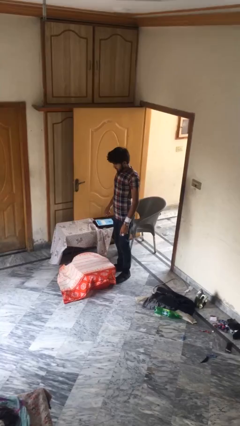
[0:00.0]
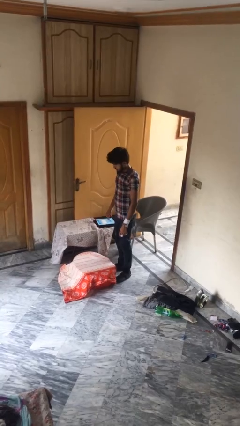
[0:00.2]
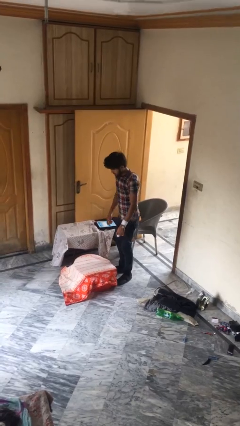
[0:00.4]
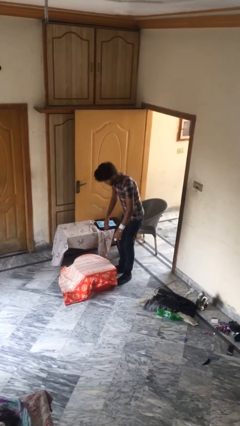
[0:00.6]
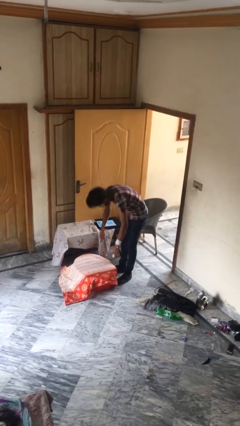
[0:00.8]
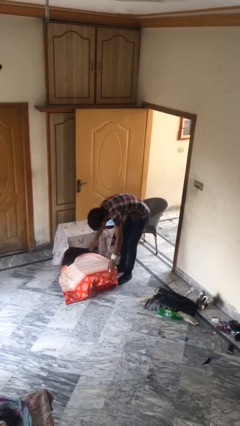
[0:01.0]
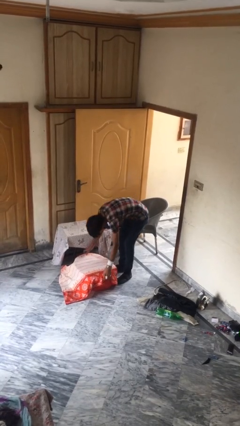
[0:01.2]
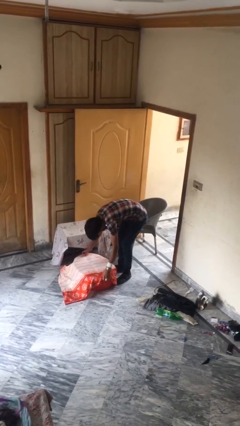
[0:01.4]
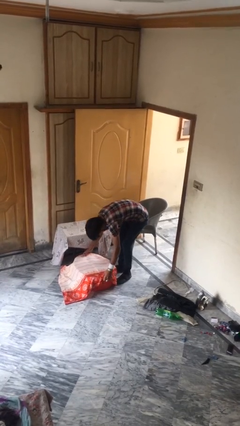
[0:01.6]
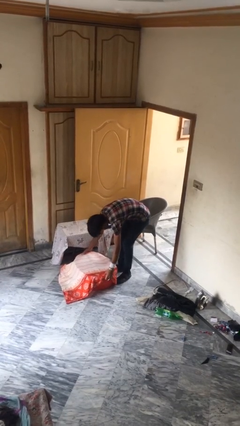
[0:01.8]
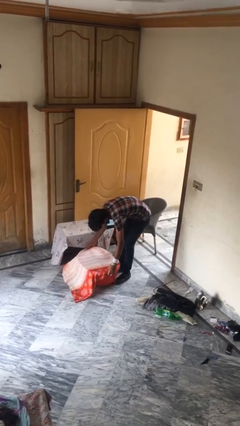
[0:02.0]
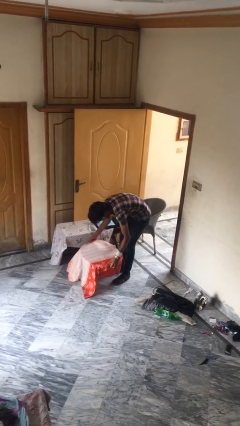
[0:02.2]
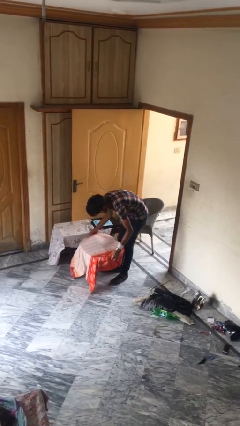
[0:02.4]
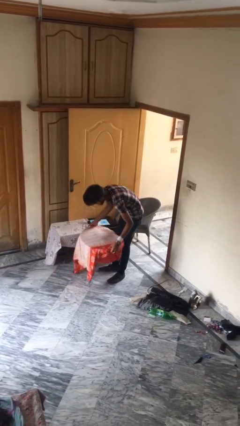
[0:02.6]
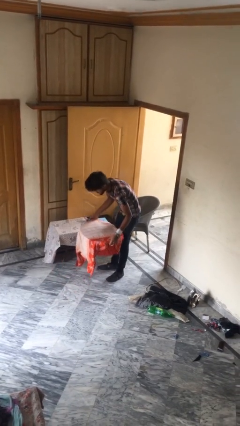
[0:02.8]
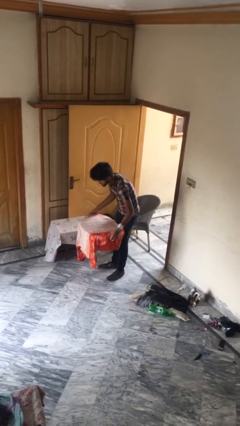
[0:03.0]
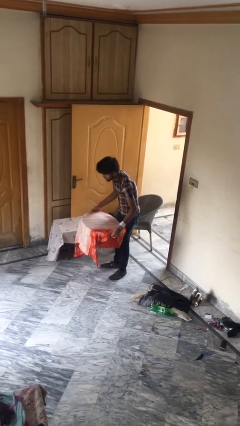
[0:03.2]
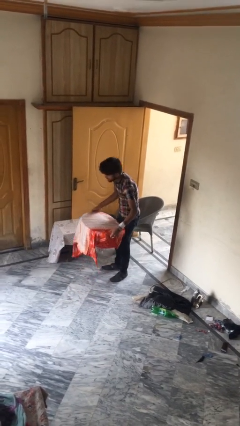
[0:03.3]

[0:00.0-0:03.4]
person picks up object from floor

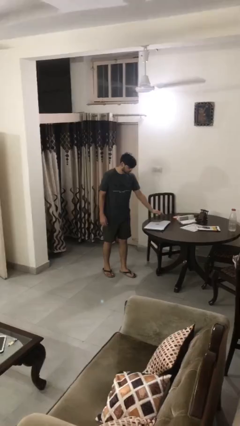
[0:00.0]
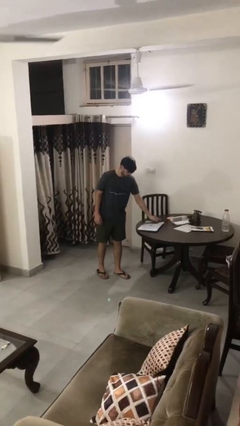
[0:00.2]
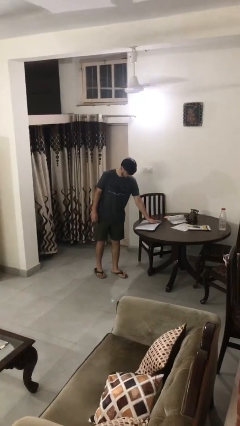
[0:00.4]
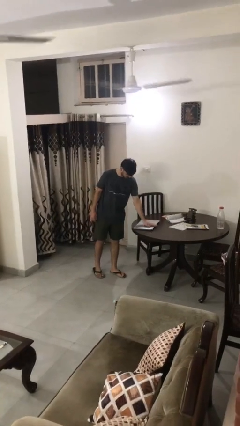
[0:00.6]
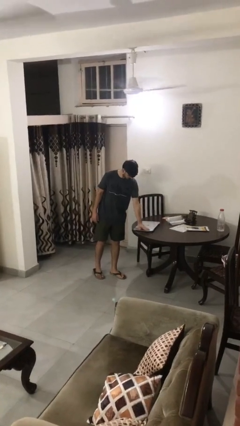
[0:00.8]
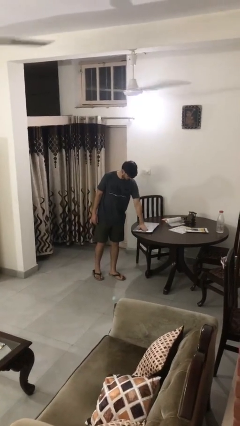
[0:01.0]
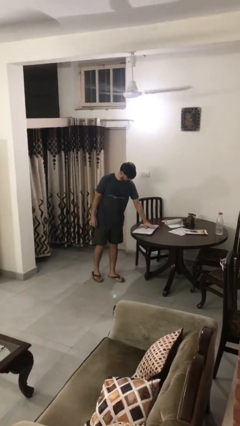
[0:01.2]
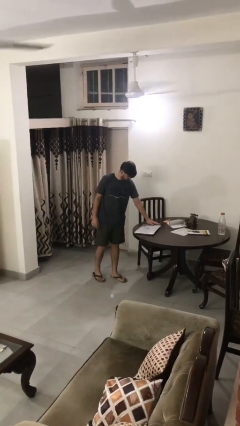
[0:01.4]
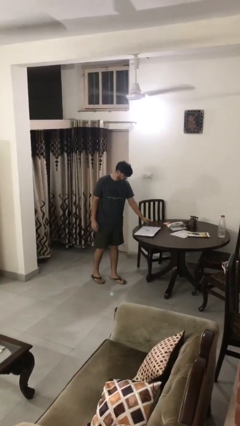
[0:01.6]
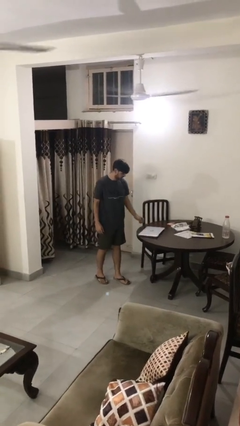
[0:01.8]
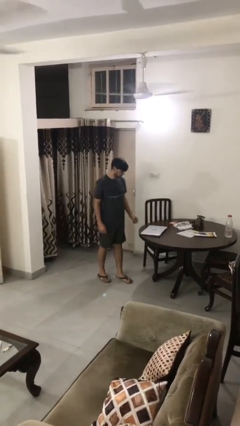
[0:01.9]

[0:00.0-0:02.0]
person waves hand over object

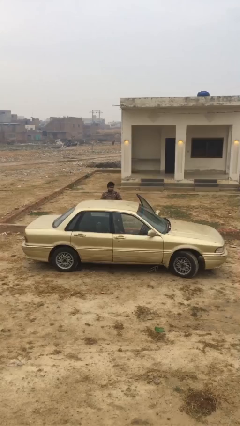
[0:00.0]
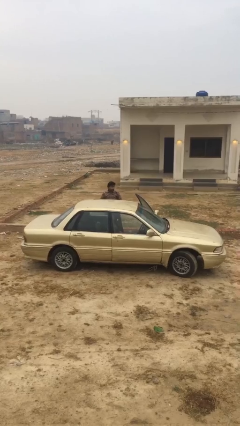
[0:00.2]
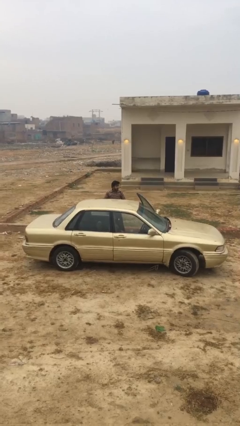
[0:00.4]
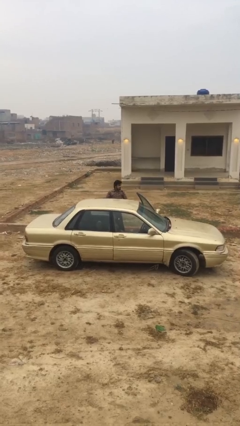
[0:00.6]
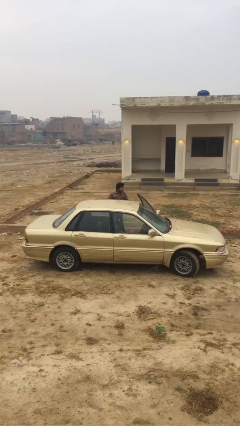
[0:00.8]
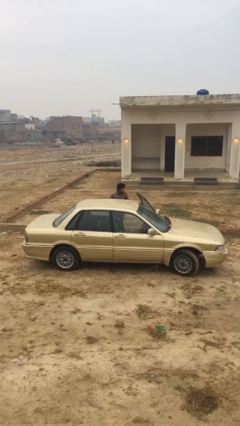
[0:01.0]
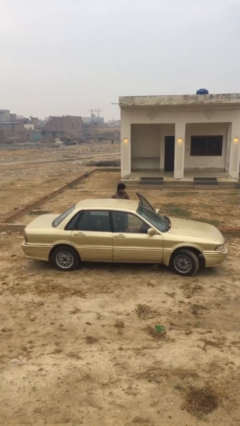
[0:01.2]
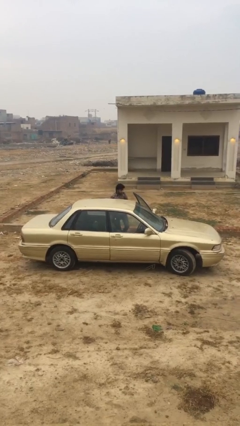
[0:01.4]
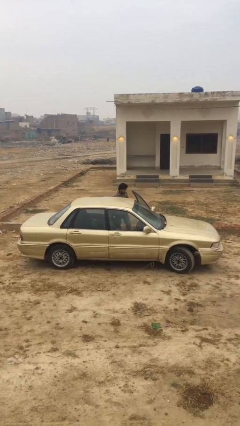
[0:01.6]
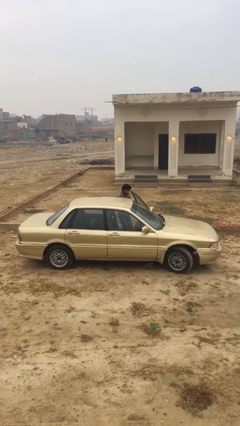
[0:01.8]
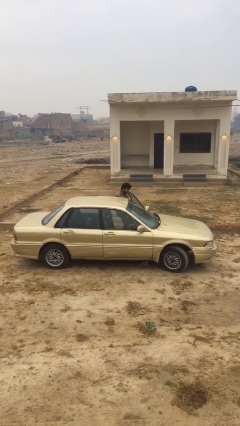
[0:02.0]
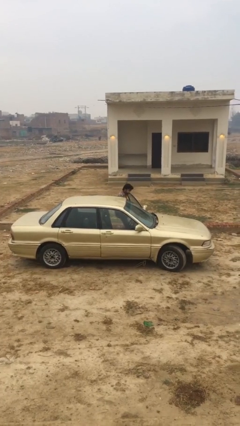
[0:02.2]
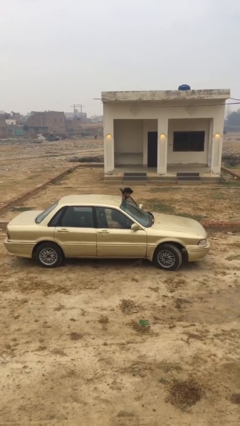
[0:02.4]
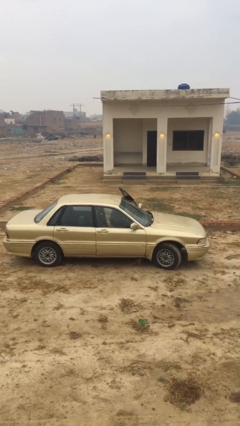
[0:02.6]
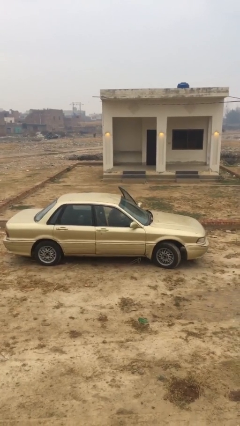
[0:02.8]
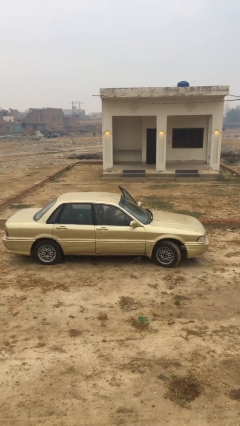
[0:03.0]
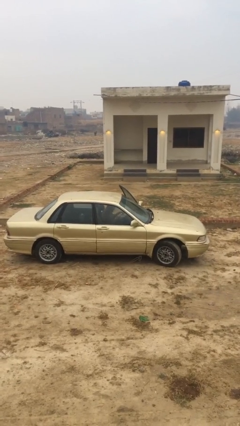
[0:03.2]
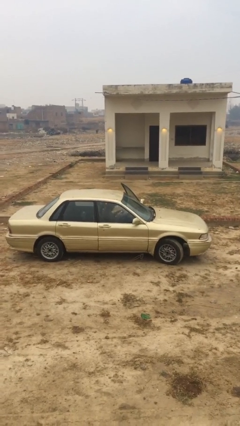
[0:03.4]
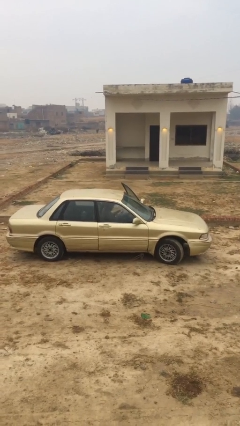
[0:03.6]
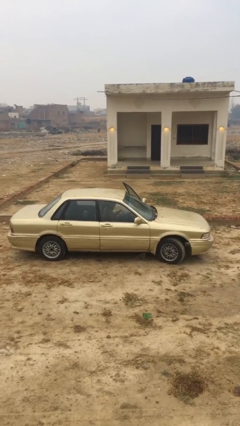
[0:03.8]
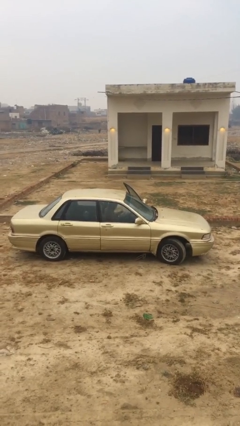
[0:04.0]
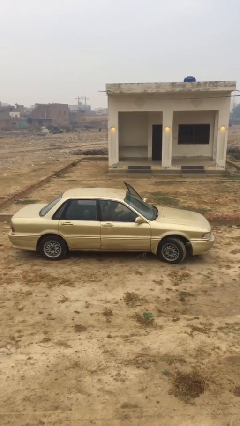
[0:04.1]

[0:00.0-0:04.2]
person enters car

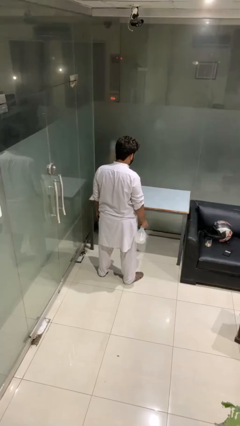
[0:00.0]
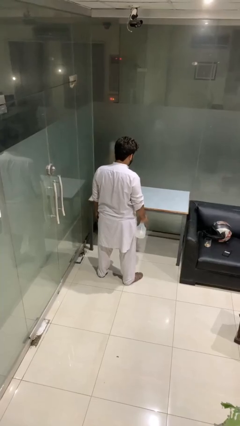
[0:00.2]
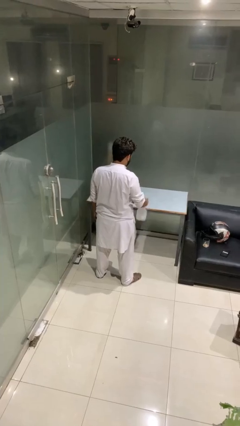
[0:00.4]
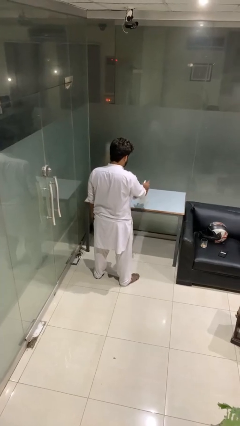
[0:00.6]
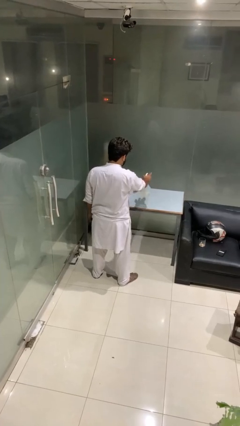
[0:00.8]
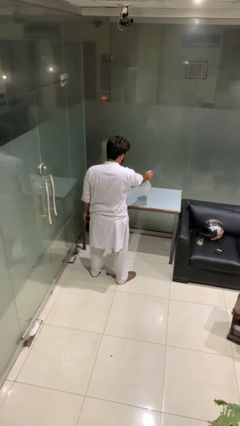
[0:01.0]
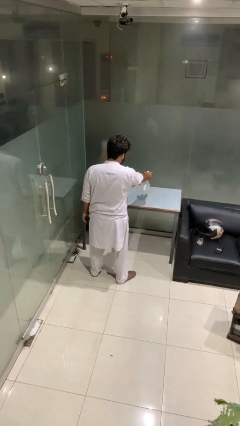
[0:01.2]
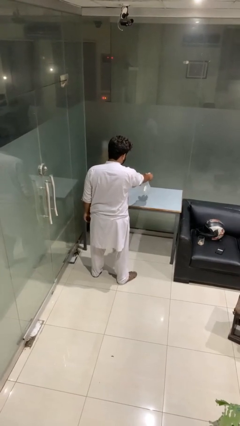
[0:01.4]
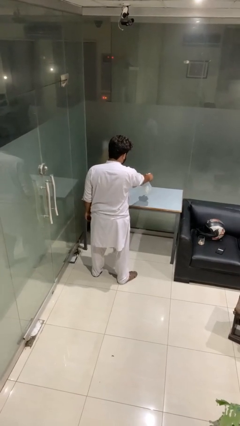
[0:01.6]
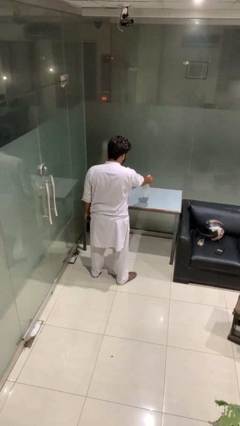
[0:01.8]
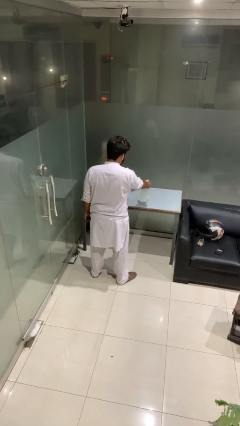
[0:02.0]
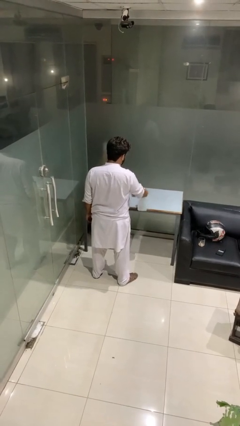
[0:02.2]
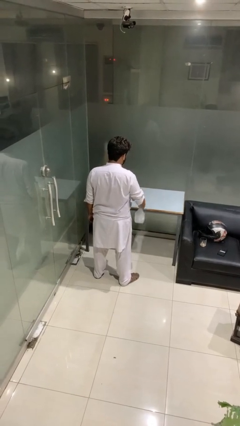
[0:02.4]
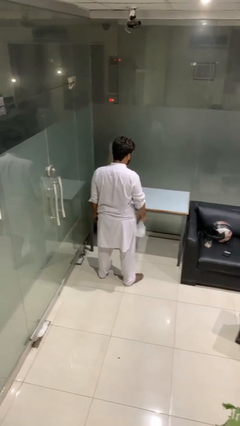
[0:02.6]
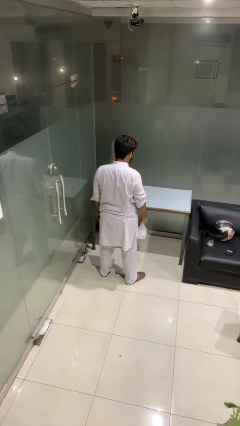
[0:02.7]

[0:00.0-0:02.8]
person sprays from bottle

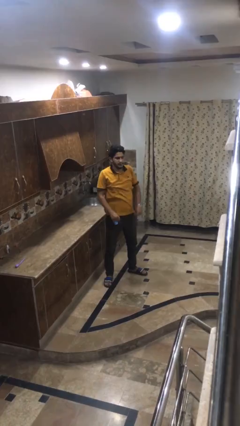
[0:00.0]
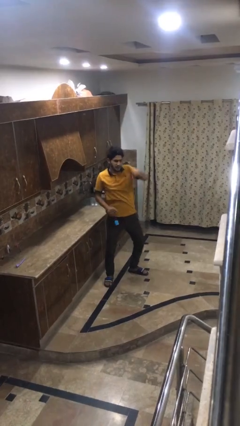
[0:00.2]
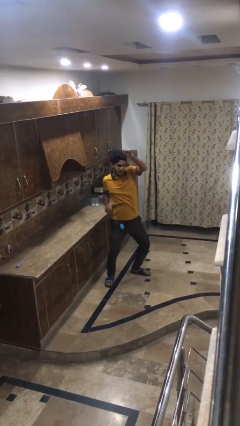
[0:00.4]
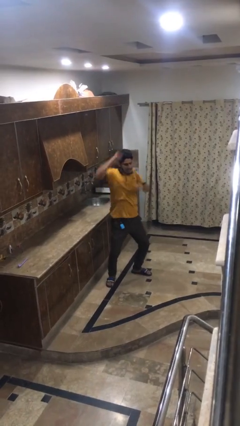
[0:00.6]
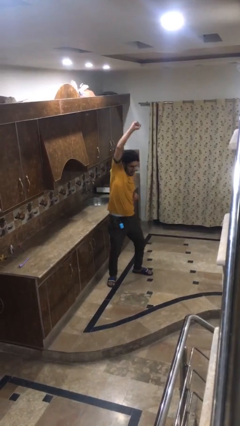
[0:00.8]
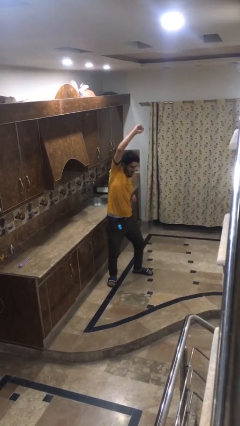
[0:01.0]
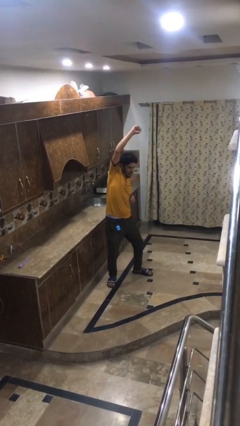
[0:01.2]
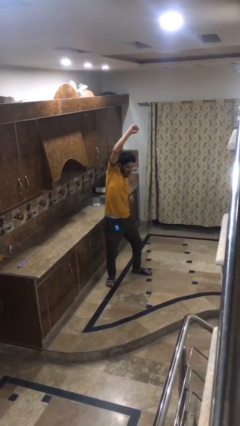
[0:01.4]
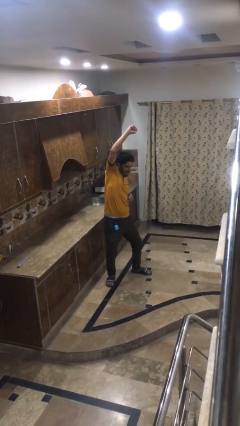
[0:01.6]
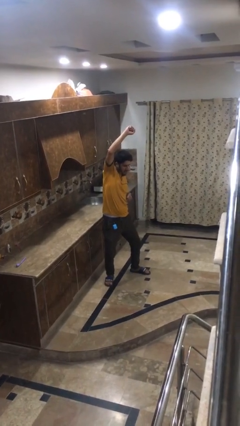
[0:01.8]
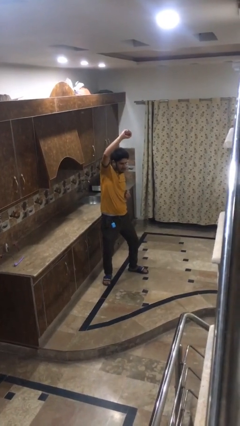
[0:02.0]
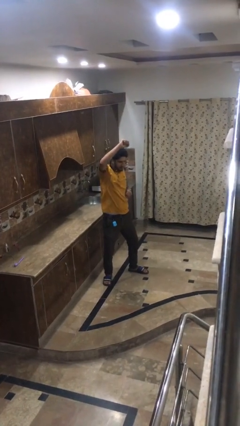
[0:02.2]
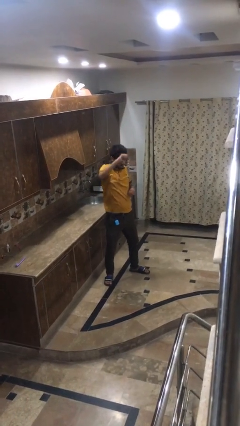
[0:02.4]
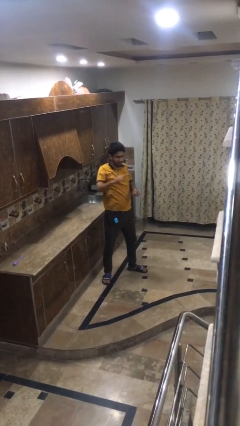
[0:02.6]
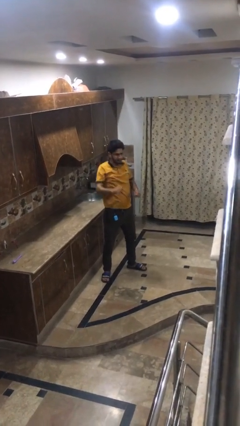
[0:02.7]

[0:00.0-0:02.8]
person punches

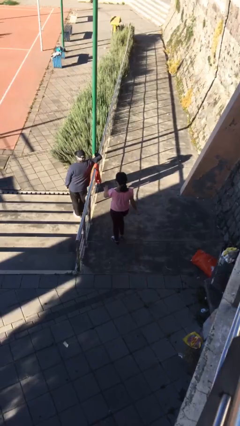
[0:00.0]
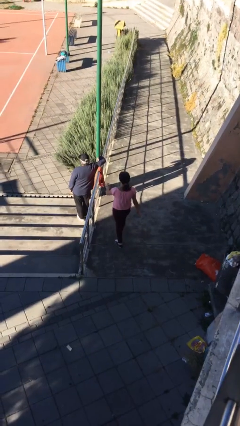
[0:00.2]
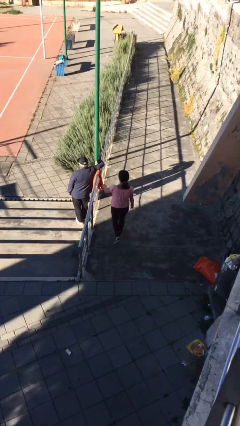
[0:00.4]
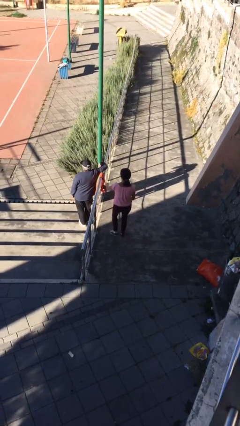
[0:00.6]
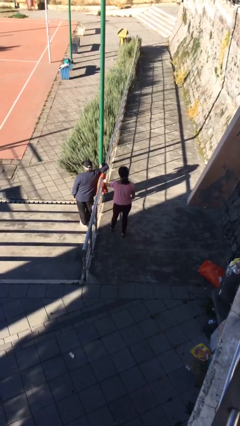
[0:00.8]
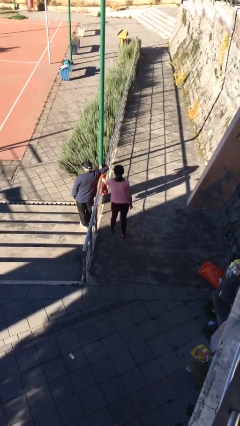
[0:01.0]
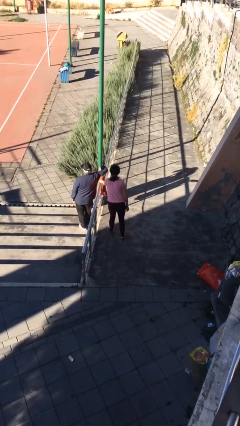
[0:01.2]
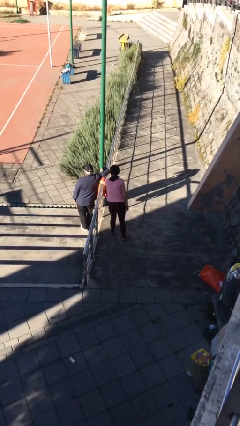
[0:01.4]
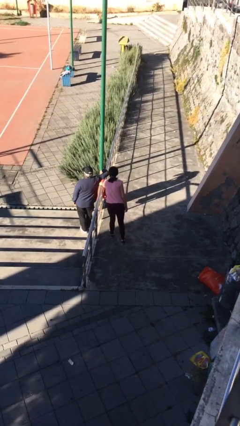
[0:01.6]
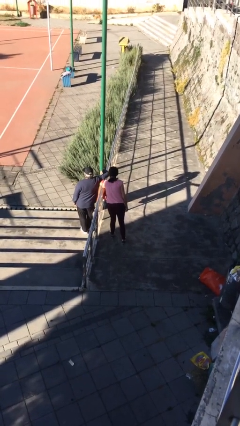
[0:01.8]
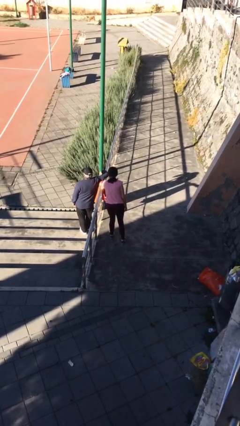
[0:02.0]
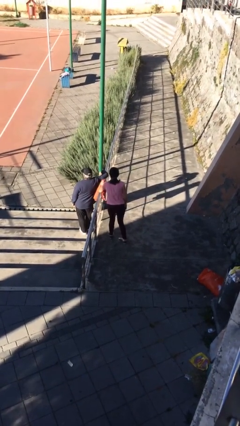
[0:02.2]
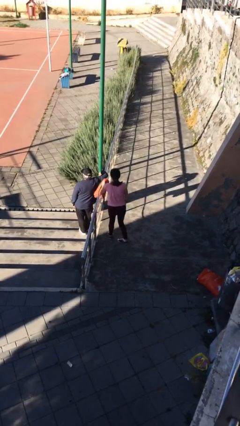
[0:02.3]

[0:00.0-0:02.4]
person steals object from person
